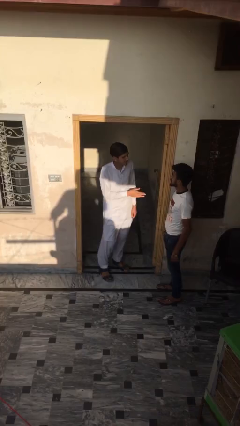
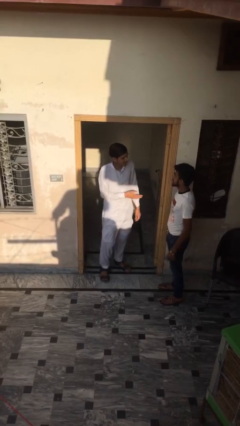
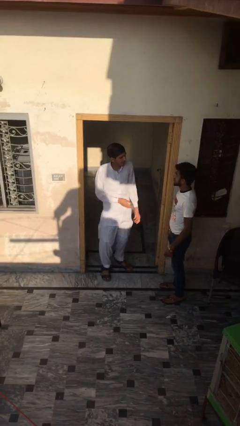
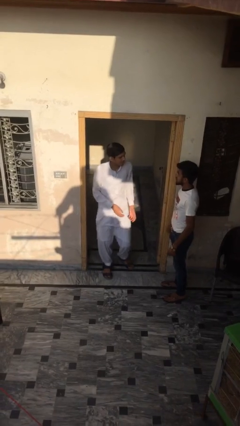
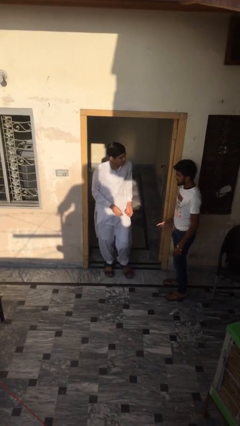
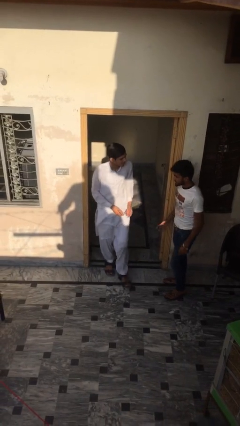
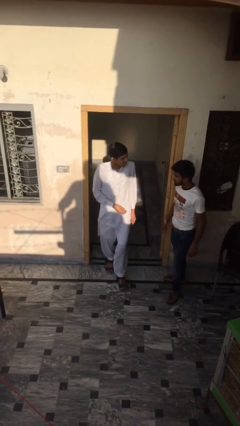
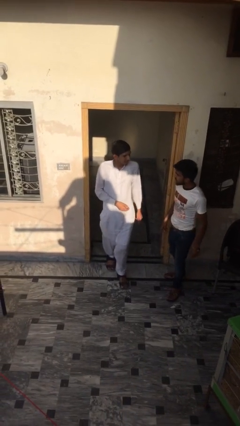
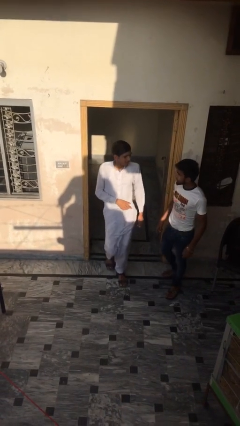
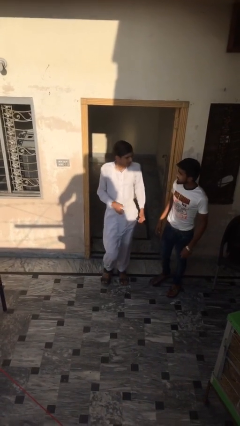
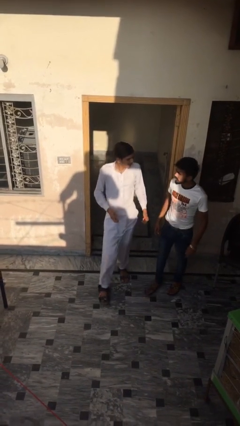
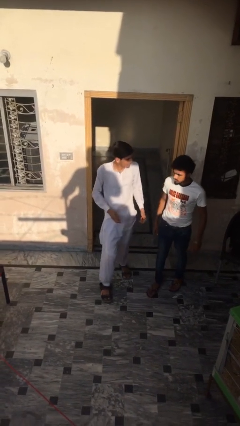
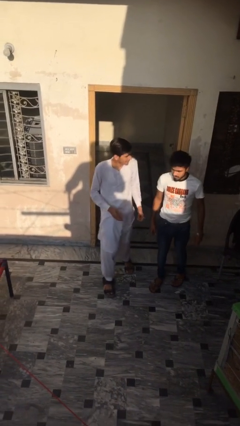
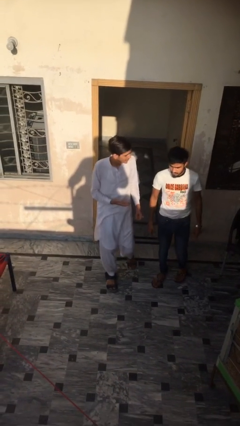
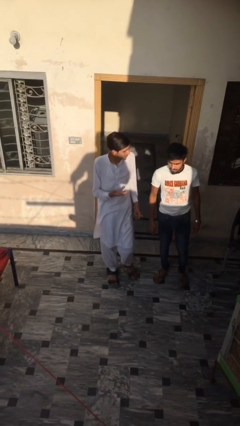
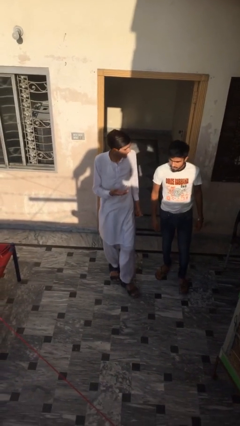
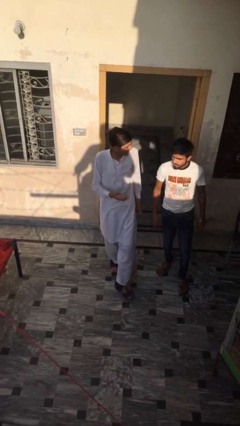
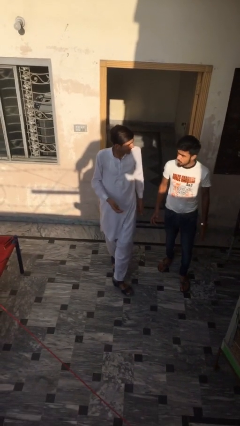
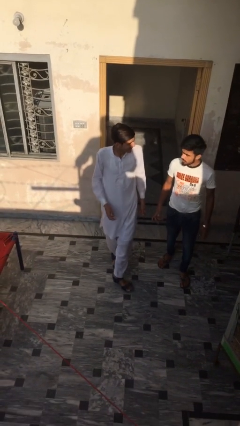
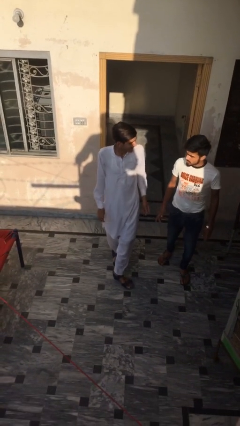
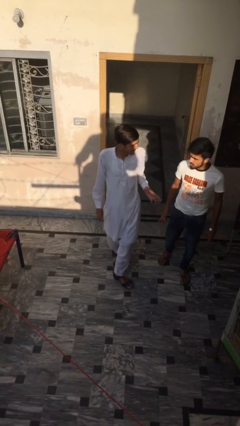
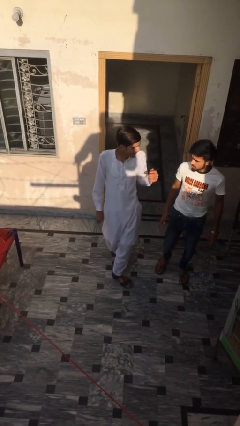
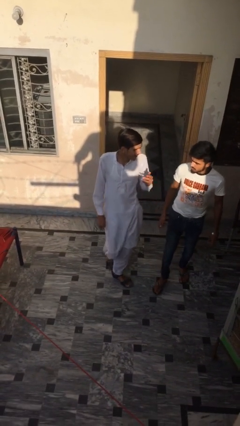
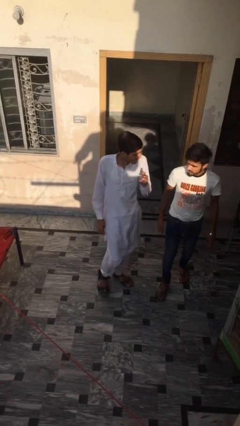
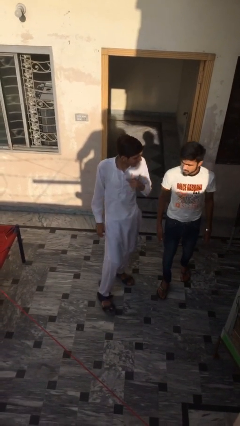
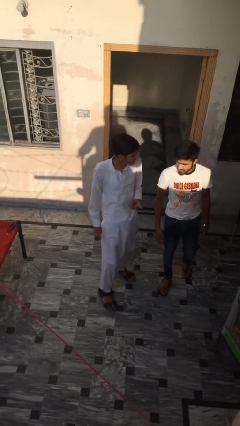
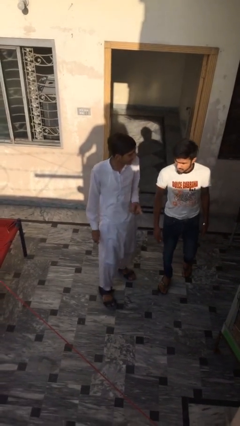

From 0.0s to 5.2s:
person talks to person

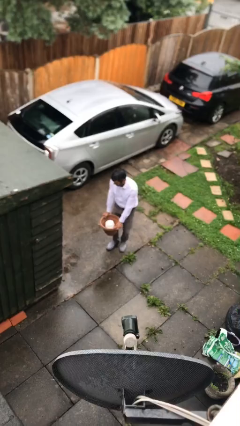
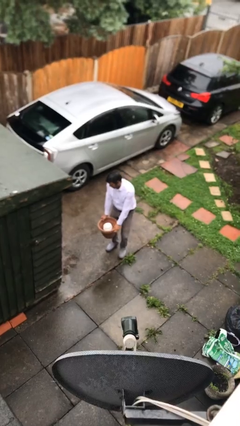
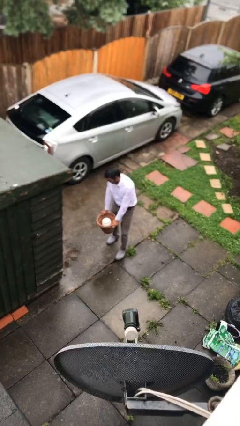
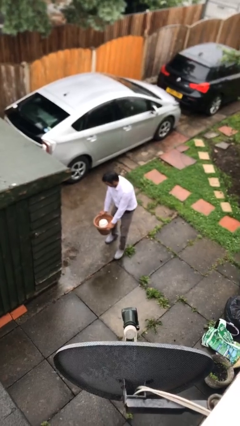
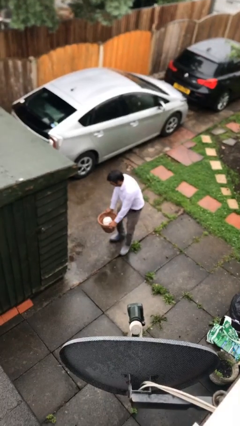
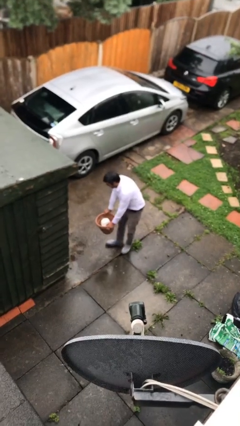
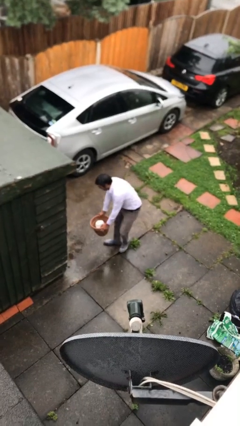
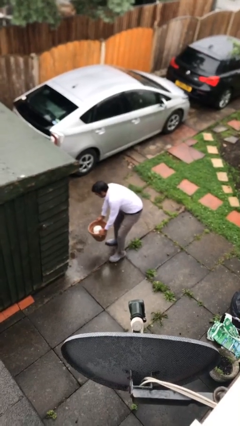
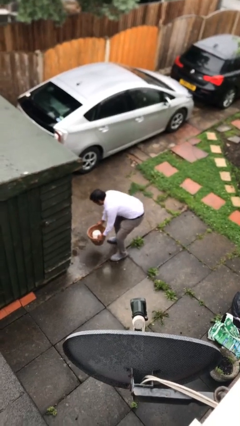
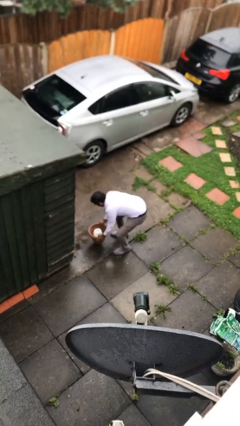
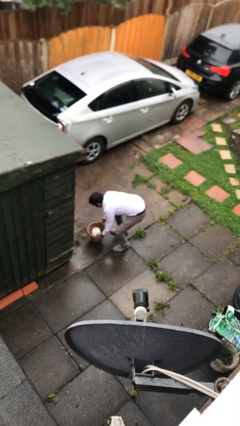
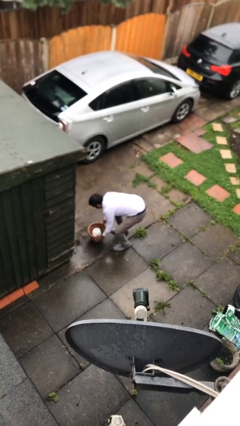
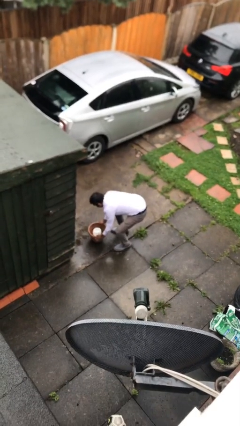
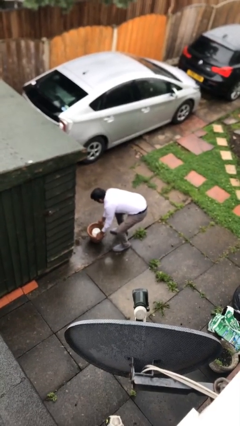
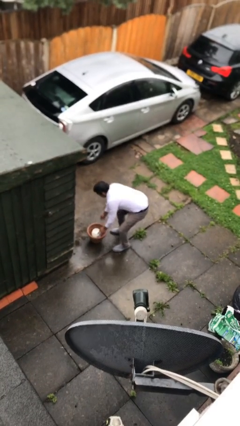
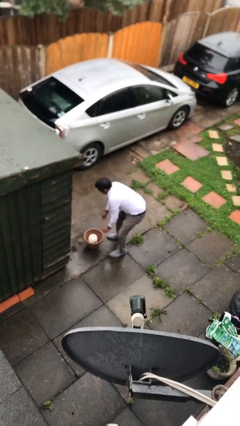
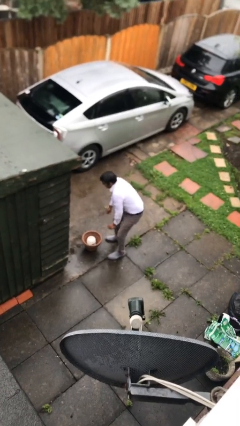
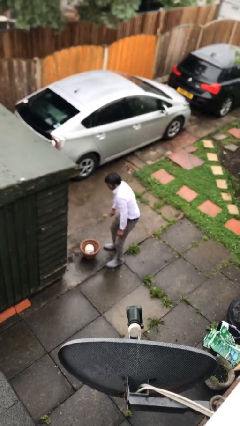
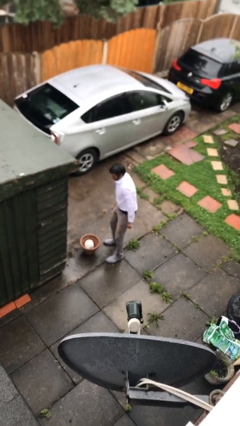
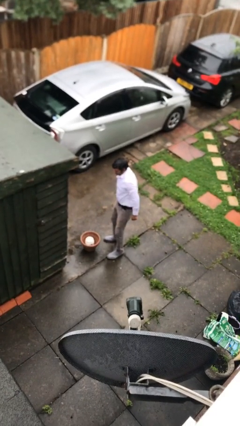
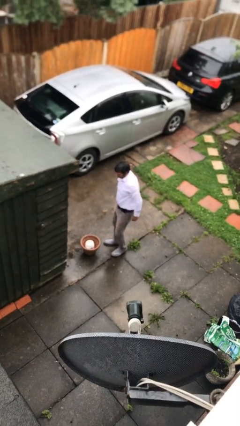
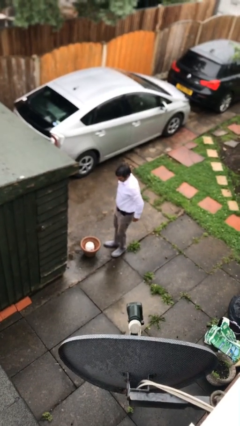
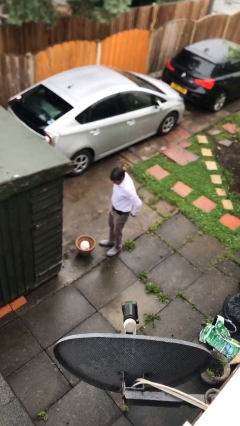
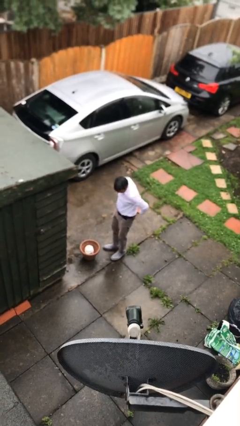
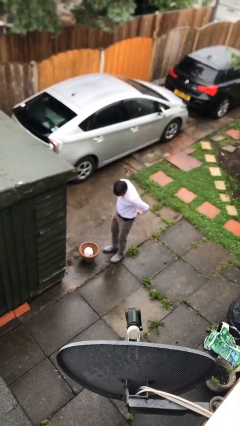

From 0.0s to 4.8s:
person puts down object on floor

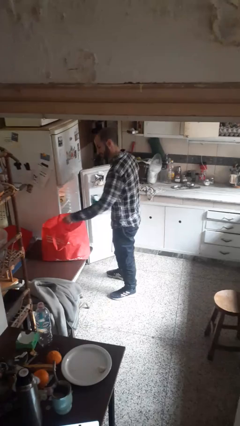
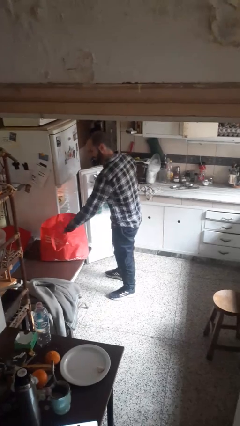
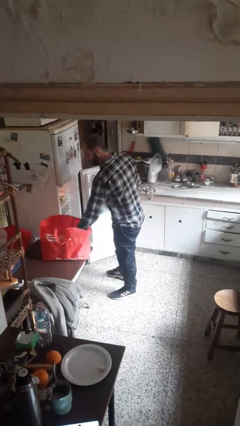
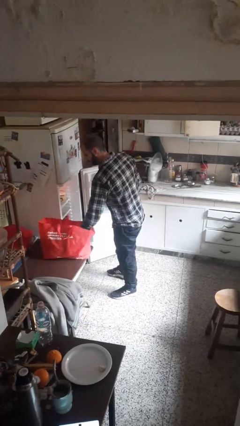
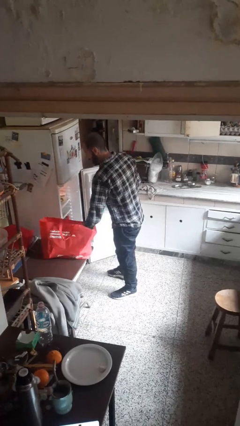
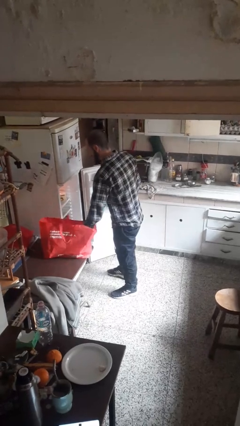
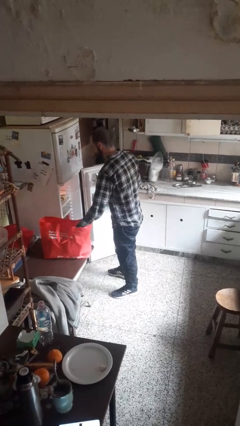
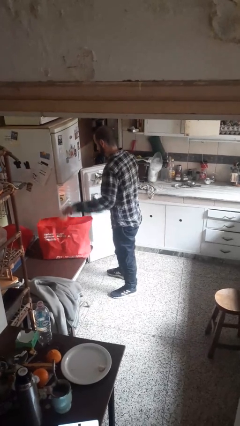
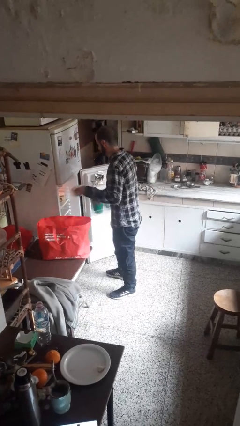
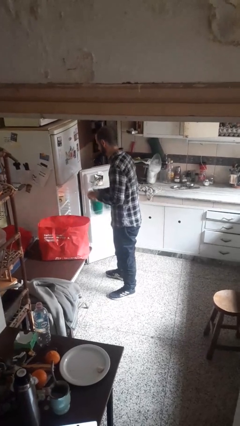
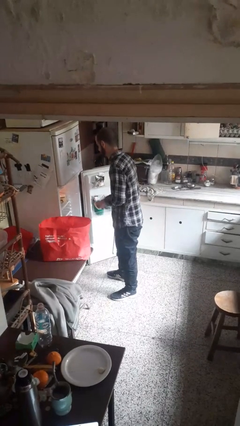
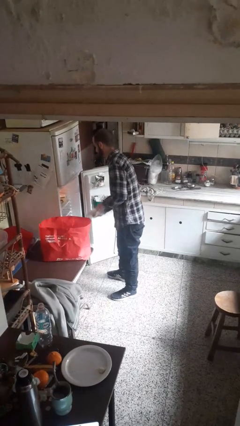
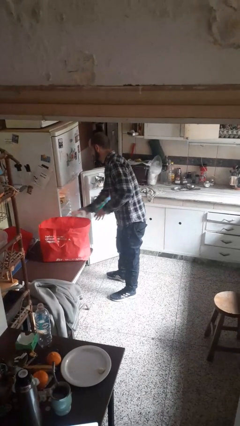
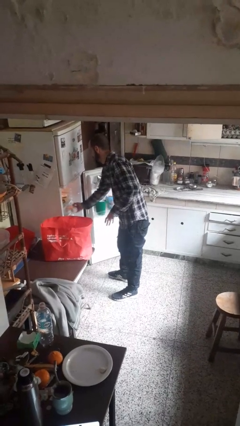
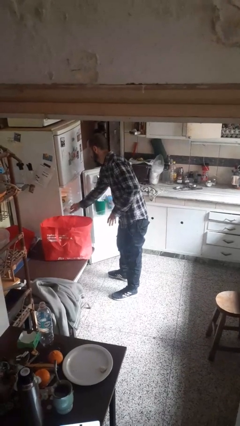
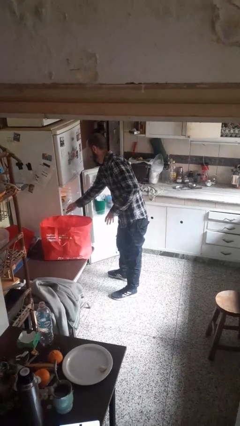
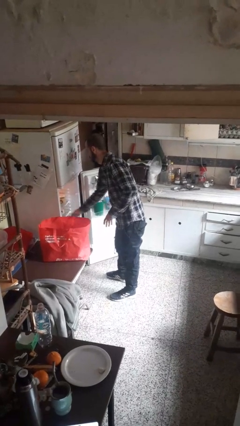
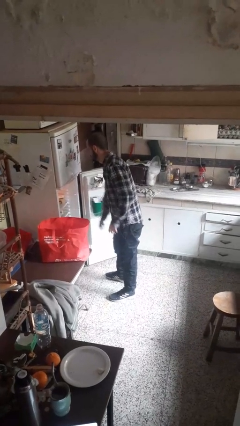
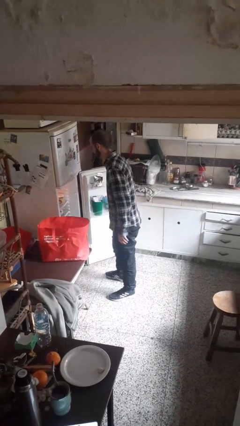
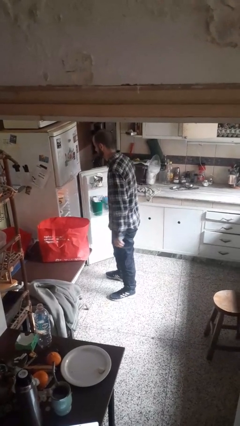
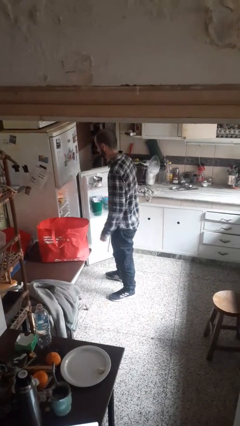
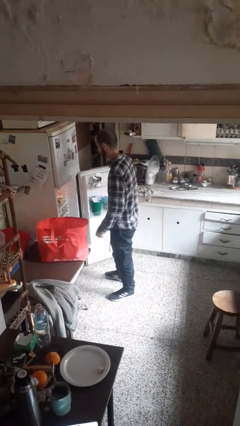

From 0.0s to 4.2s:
person loads groceries into refrigerator

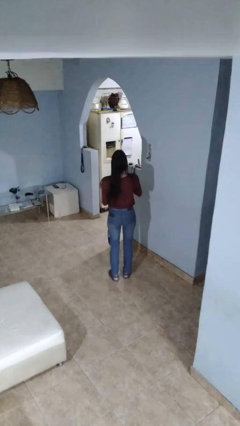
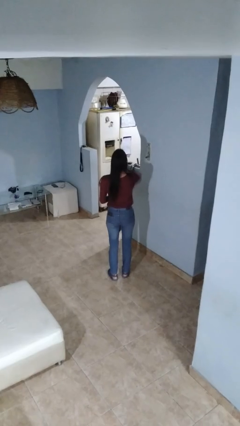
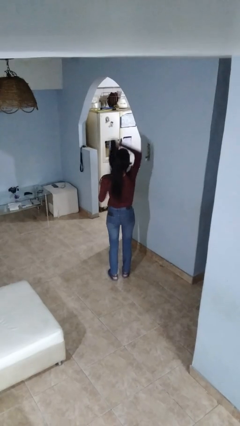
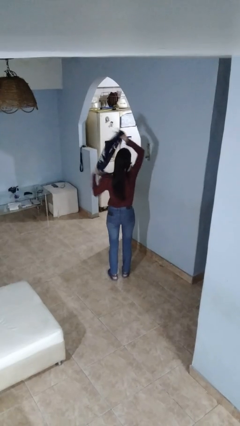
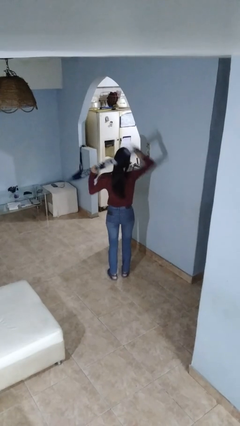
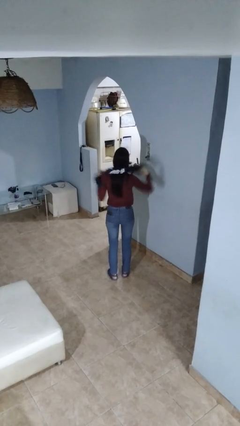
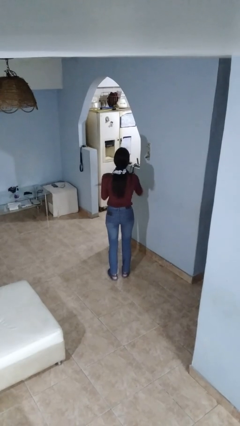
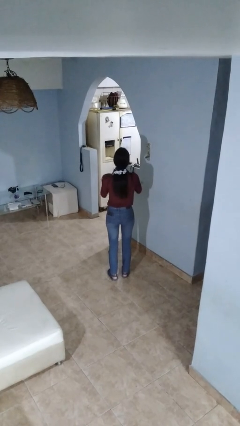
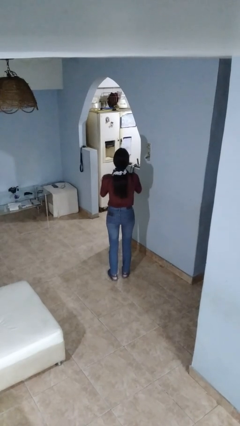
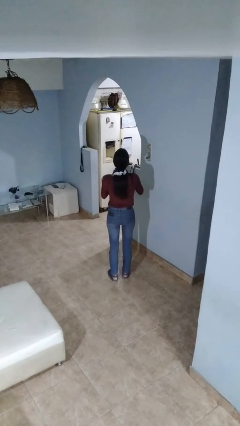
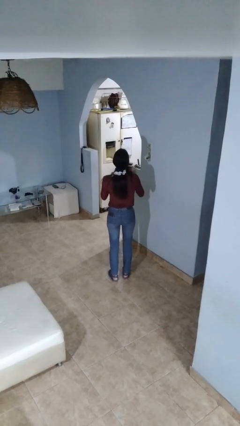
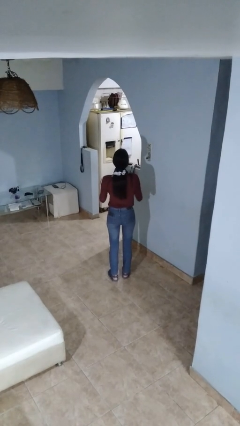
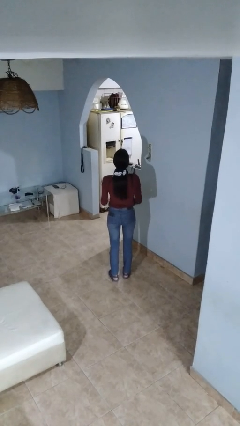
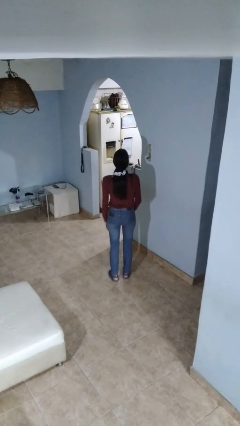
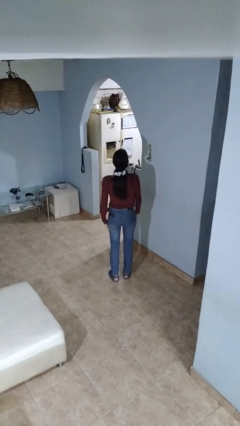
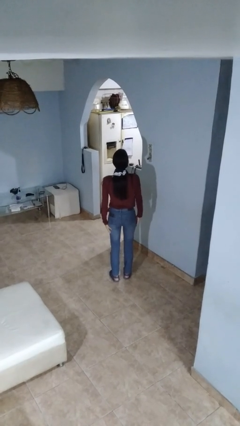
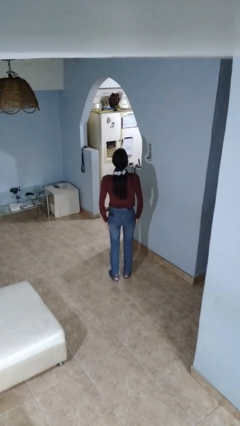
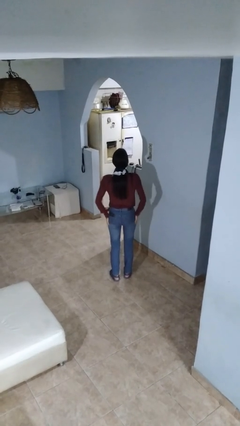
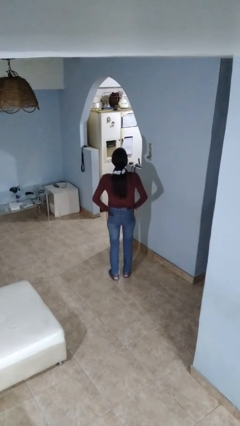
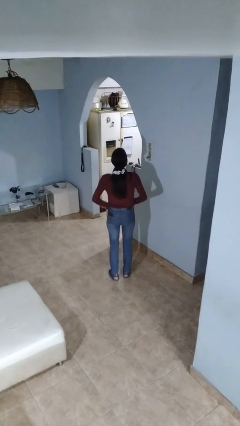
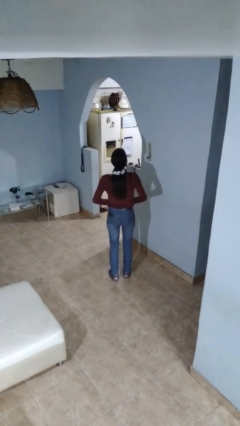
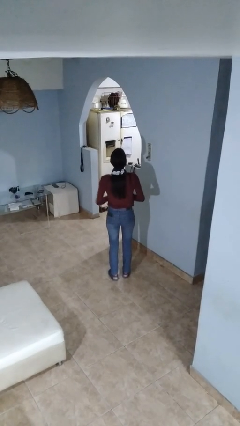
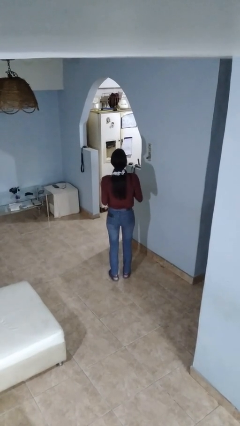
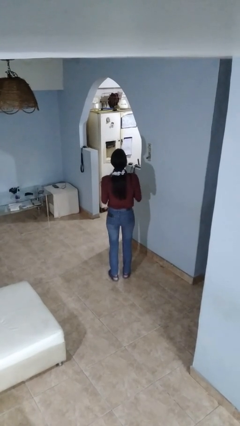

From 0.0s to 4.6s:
person puts on scarf
